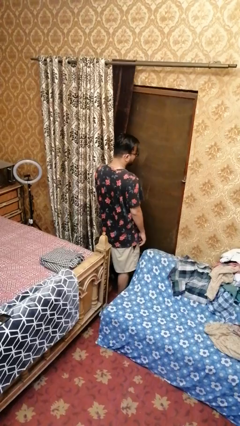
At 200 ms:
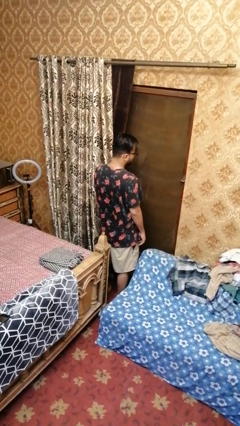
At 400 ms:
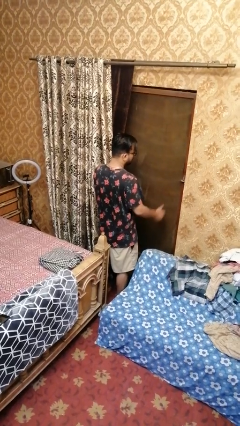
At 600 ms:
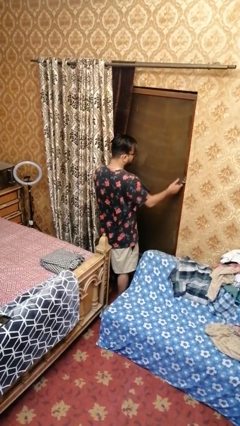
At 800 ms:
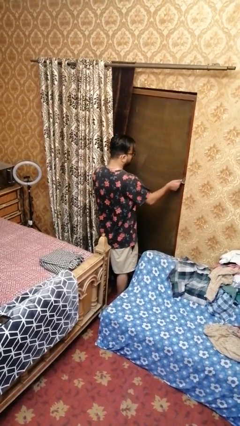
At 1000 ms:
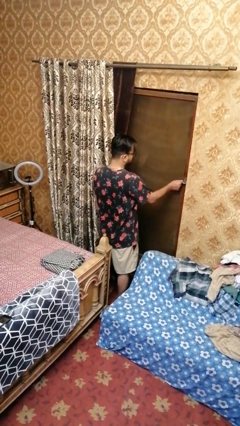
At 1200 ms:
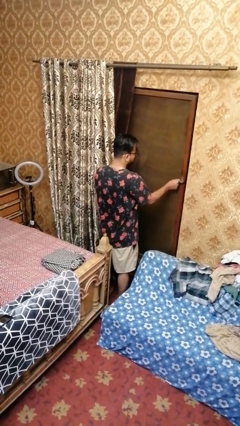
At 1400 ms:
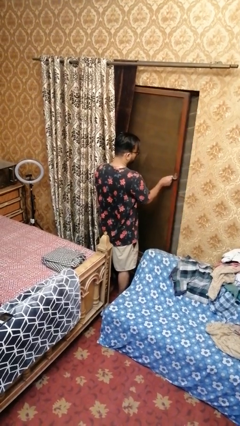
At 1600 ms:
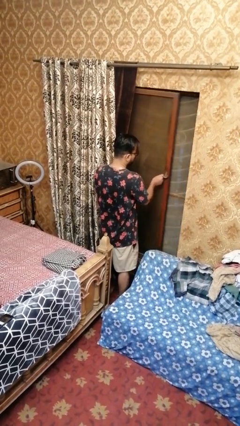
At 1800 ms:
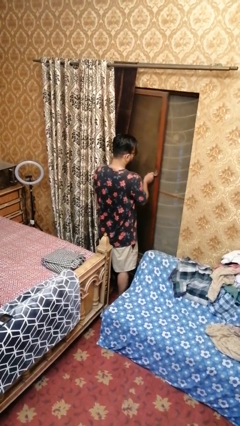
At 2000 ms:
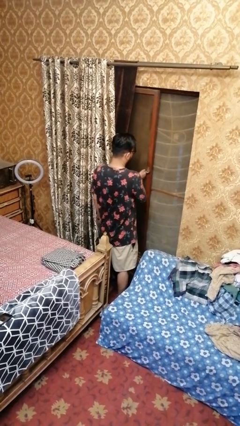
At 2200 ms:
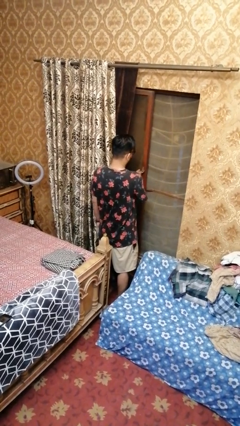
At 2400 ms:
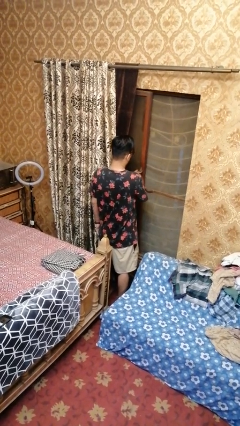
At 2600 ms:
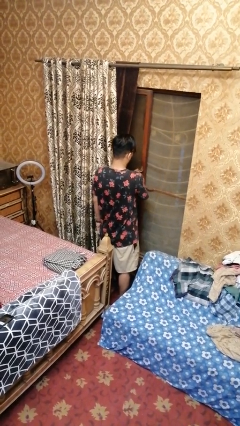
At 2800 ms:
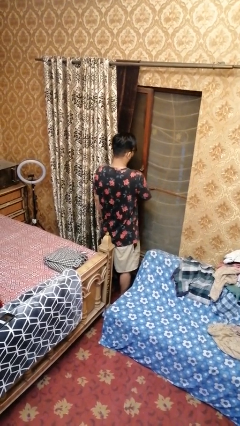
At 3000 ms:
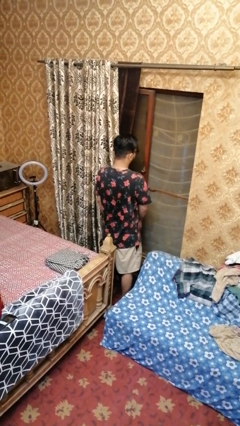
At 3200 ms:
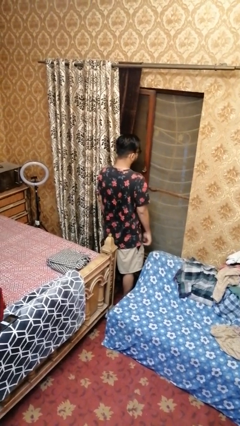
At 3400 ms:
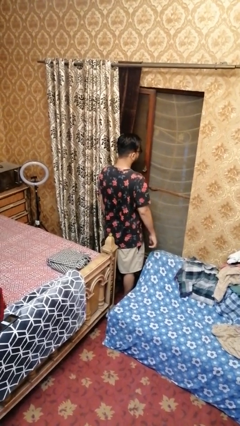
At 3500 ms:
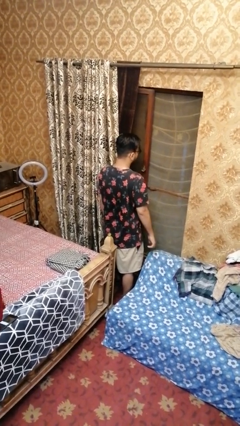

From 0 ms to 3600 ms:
person opens home window

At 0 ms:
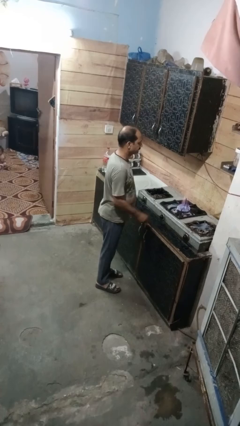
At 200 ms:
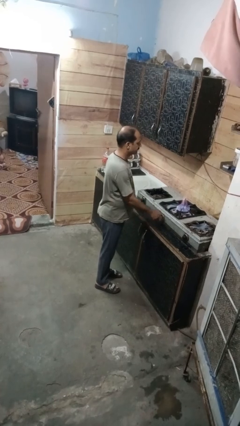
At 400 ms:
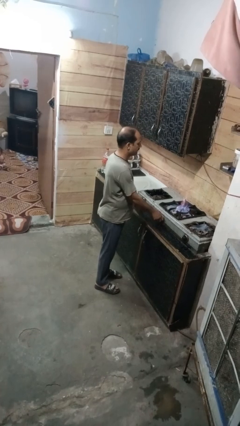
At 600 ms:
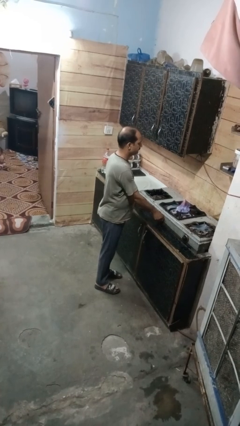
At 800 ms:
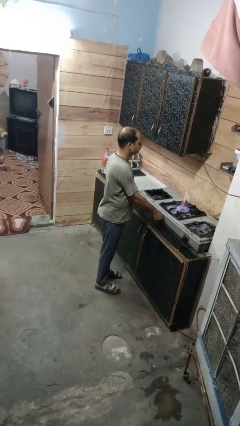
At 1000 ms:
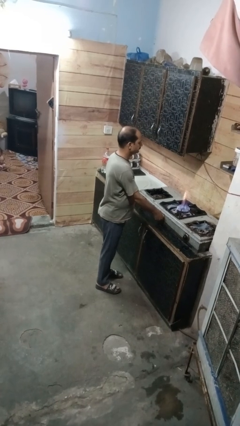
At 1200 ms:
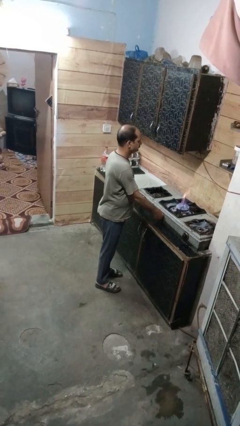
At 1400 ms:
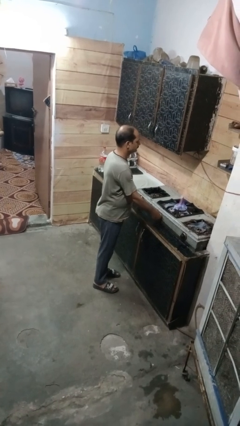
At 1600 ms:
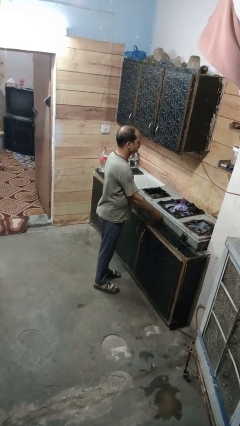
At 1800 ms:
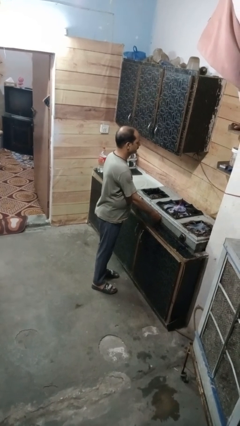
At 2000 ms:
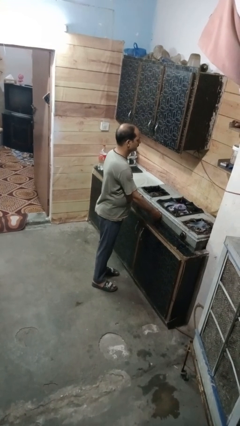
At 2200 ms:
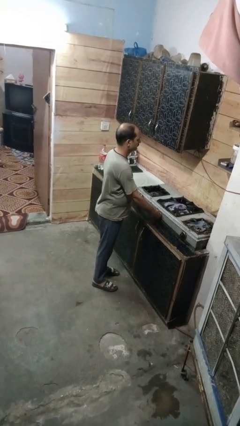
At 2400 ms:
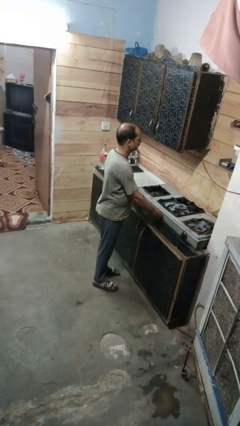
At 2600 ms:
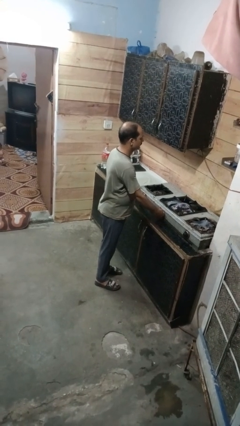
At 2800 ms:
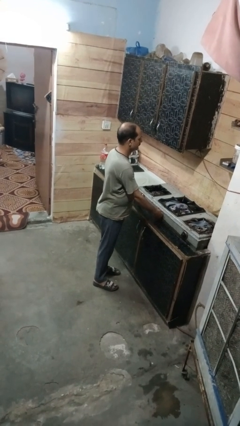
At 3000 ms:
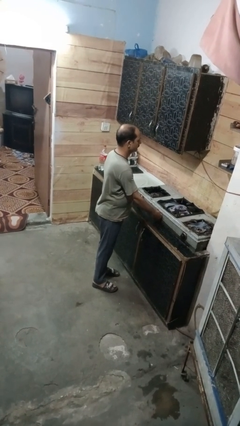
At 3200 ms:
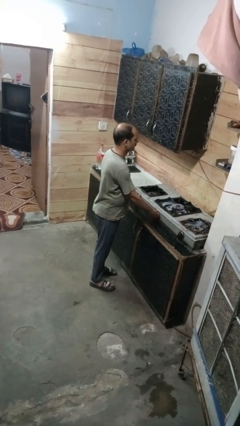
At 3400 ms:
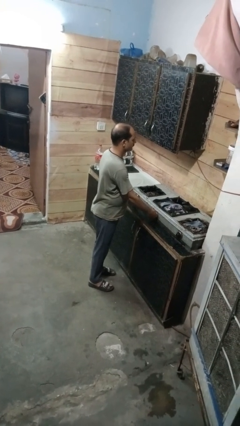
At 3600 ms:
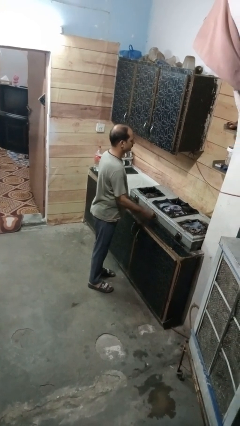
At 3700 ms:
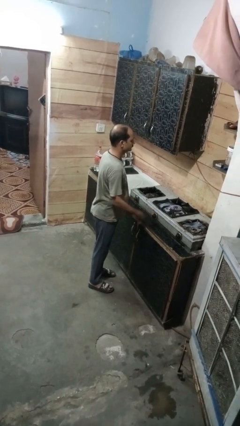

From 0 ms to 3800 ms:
person turns off stovetop

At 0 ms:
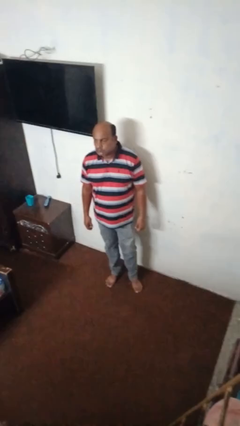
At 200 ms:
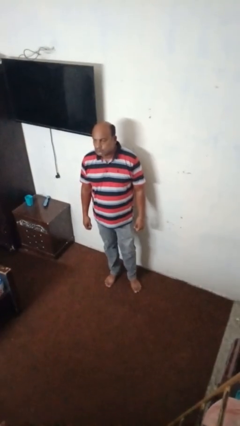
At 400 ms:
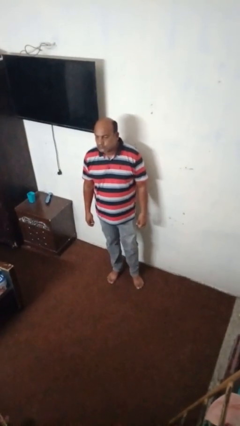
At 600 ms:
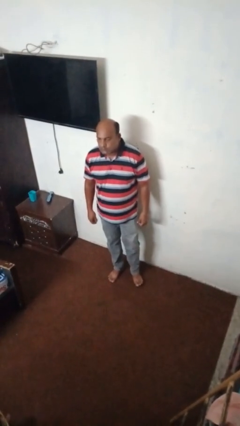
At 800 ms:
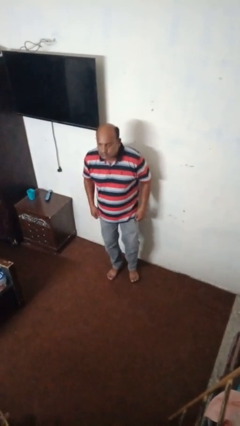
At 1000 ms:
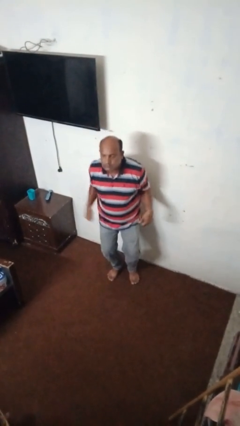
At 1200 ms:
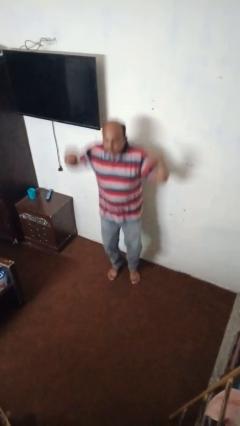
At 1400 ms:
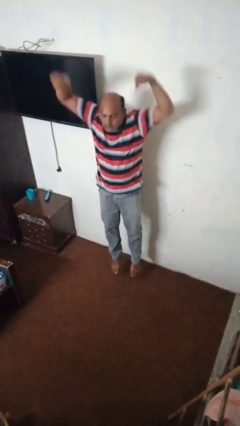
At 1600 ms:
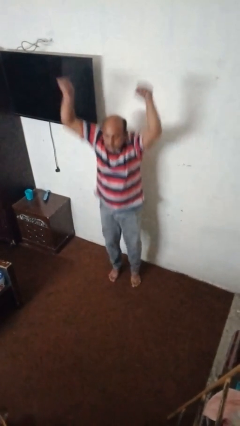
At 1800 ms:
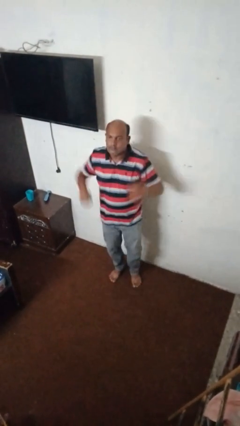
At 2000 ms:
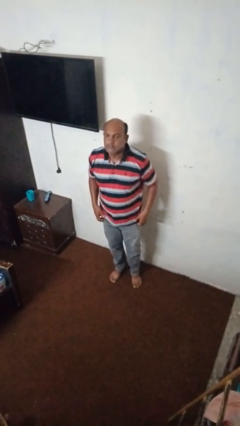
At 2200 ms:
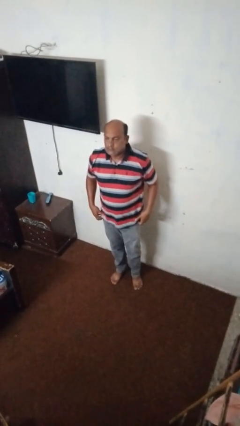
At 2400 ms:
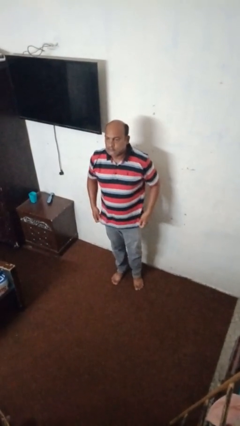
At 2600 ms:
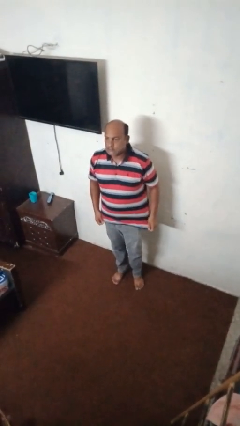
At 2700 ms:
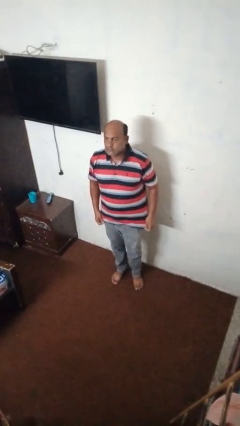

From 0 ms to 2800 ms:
person jumps

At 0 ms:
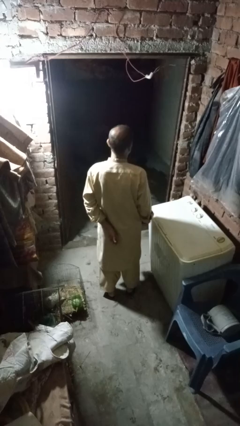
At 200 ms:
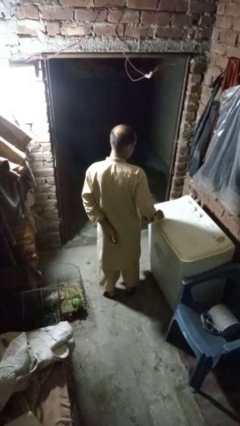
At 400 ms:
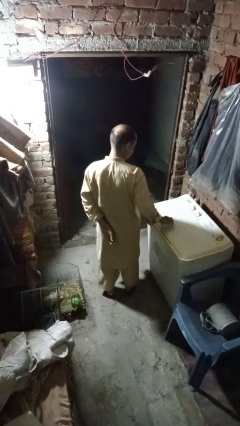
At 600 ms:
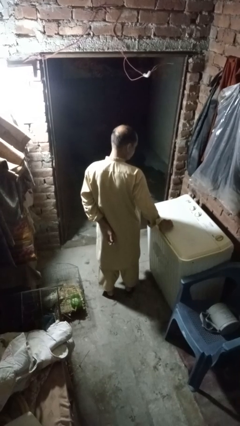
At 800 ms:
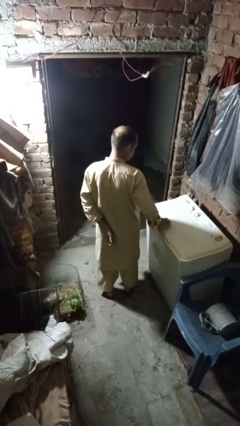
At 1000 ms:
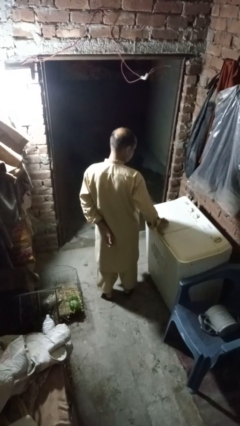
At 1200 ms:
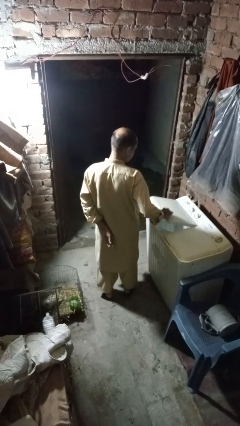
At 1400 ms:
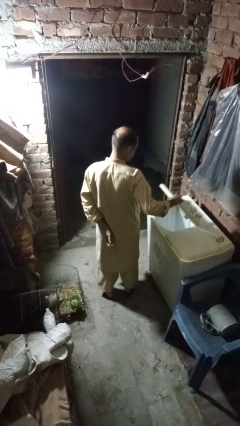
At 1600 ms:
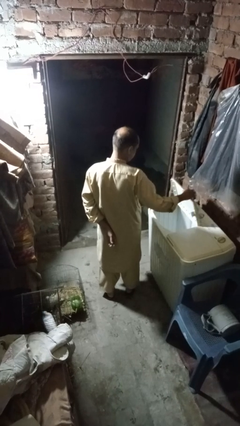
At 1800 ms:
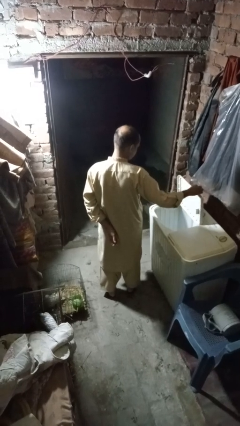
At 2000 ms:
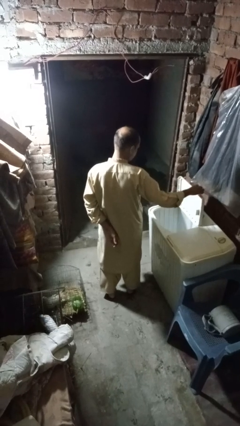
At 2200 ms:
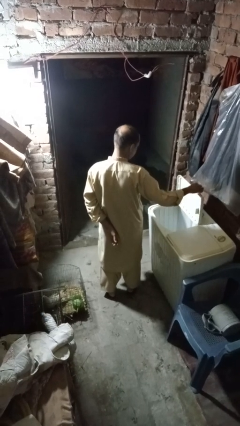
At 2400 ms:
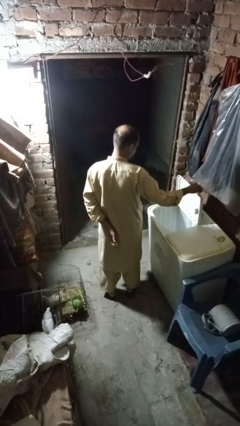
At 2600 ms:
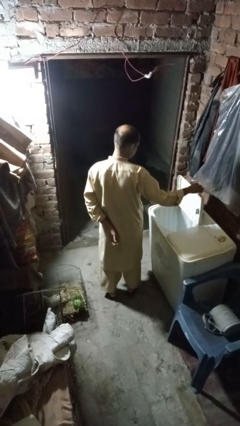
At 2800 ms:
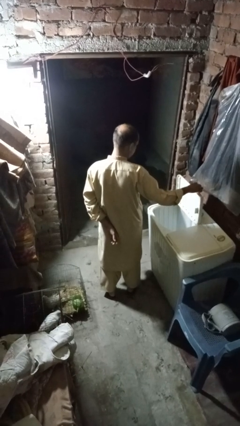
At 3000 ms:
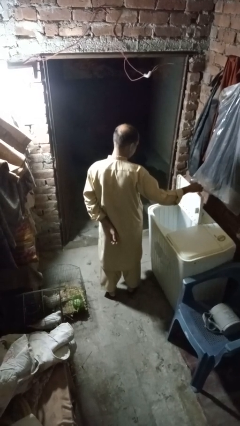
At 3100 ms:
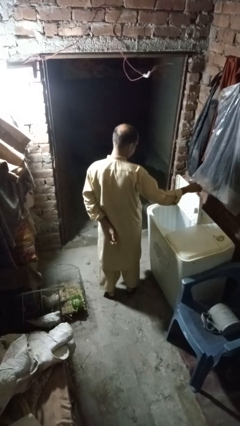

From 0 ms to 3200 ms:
person opens clothes washer

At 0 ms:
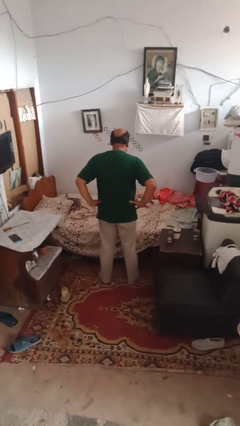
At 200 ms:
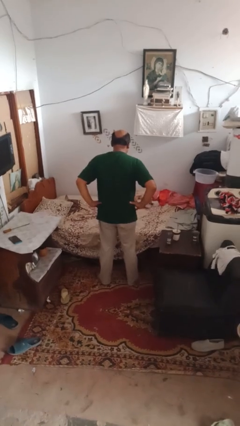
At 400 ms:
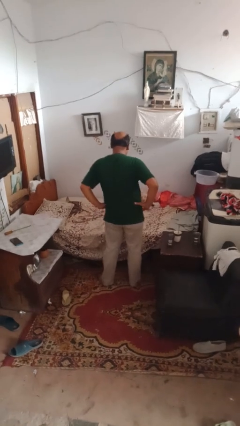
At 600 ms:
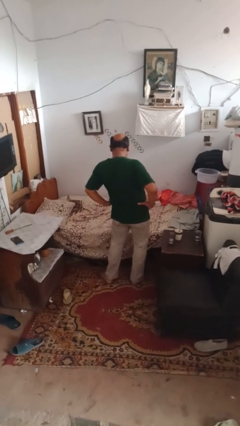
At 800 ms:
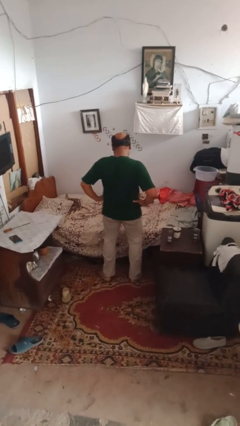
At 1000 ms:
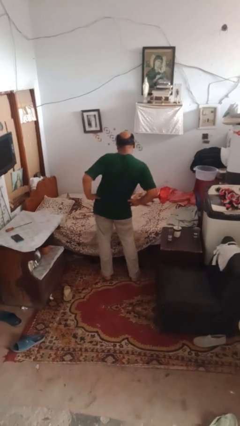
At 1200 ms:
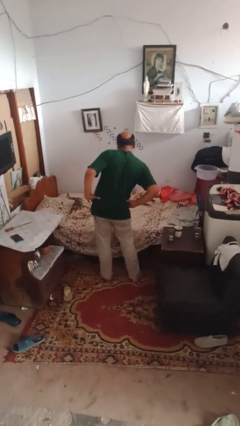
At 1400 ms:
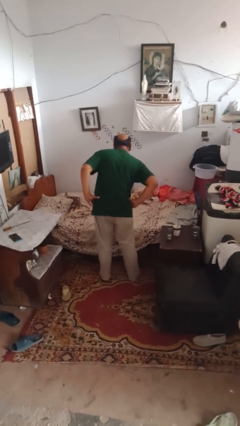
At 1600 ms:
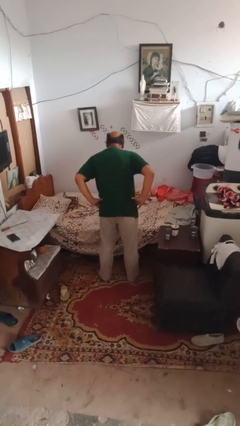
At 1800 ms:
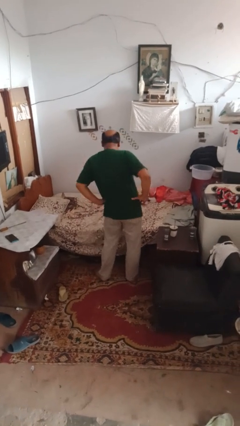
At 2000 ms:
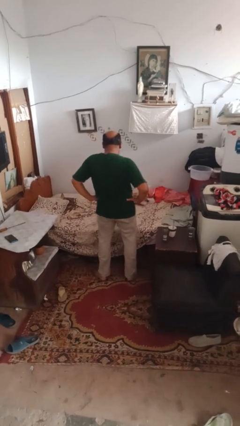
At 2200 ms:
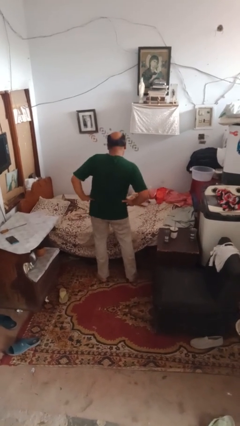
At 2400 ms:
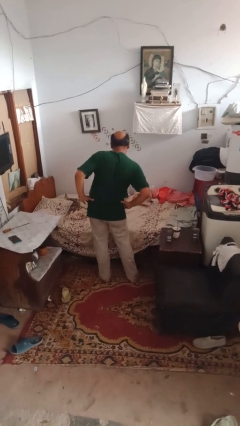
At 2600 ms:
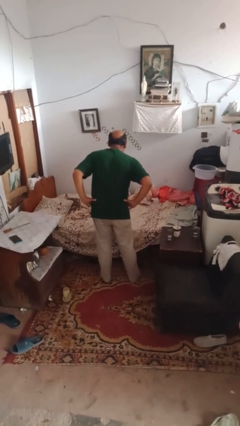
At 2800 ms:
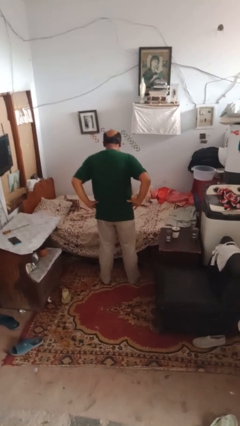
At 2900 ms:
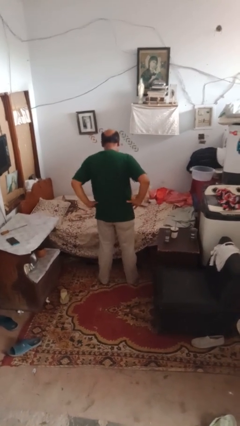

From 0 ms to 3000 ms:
person wiggles hips

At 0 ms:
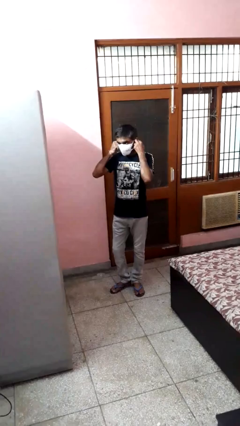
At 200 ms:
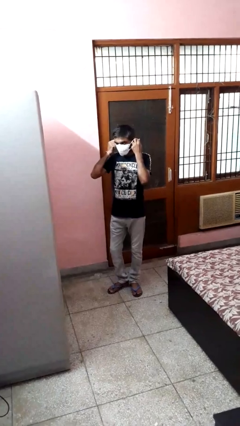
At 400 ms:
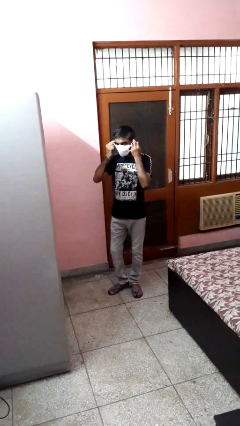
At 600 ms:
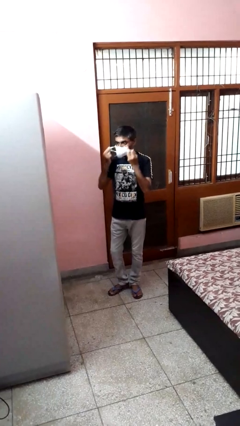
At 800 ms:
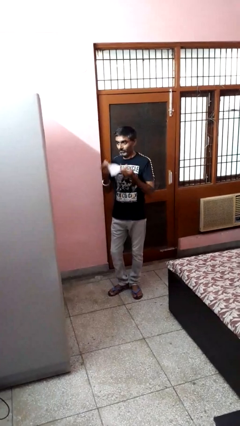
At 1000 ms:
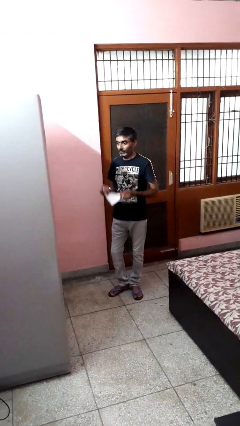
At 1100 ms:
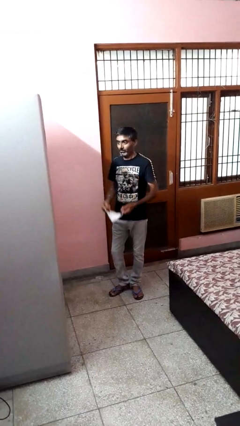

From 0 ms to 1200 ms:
person takes off facemask
